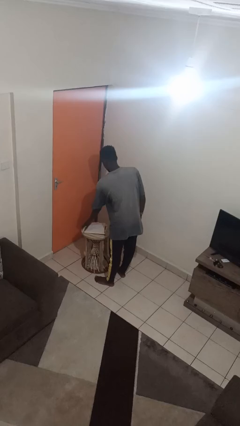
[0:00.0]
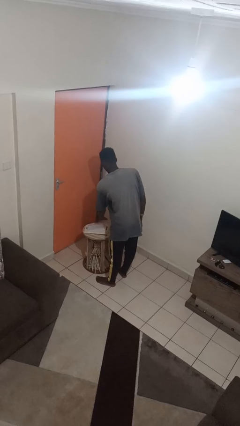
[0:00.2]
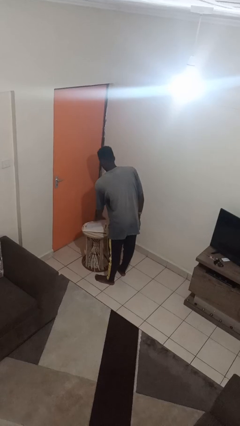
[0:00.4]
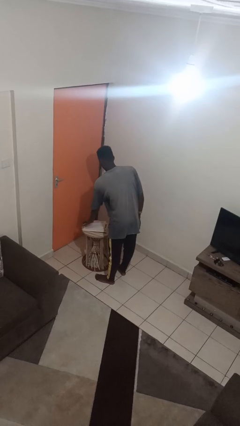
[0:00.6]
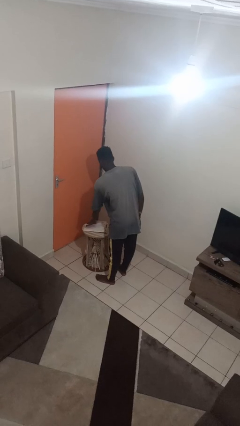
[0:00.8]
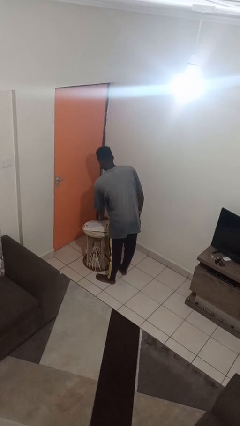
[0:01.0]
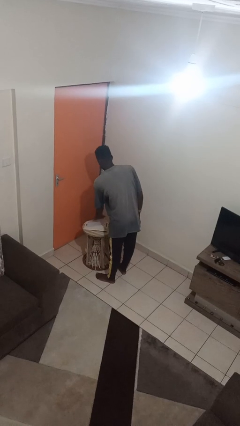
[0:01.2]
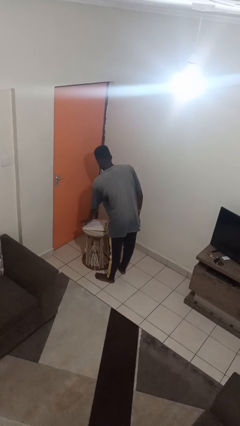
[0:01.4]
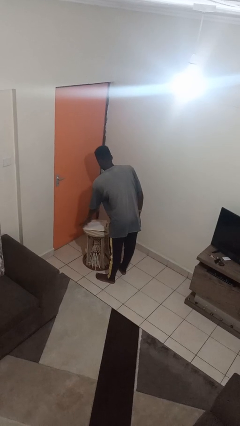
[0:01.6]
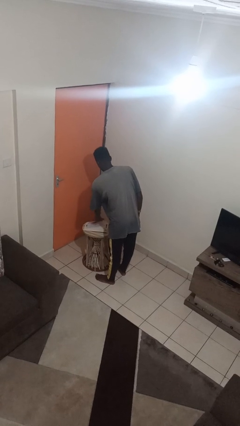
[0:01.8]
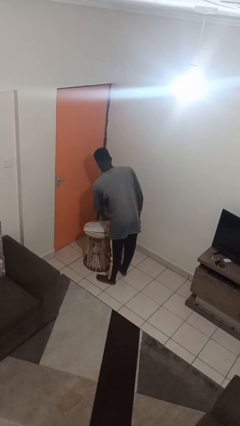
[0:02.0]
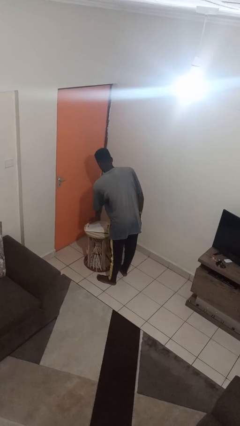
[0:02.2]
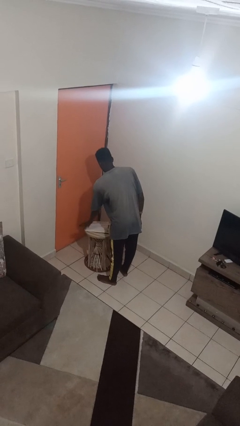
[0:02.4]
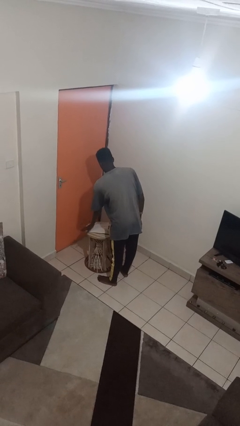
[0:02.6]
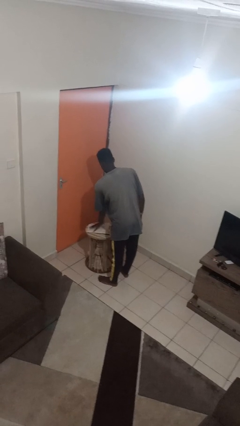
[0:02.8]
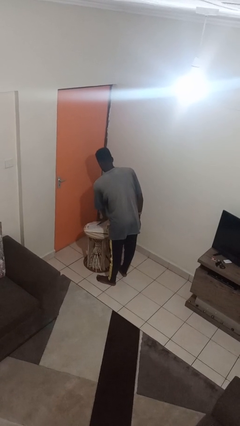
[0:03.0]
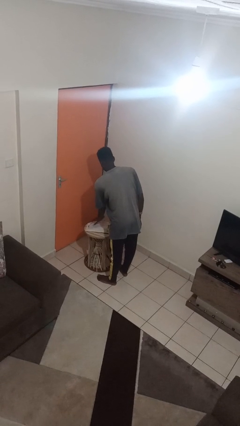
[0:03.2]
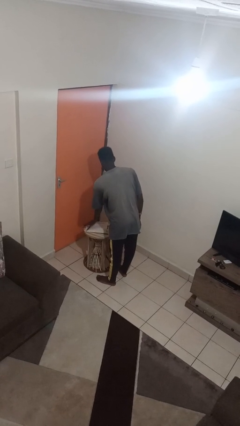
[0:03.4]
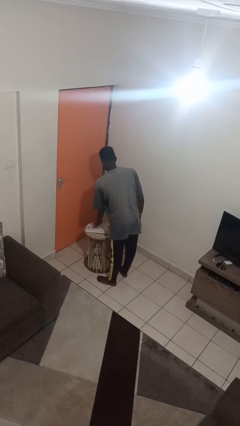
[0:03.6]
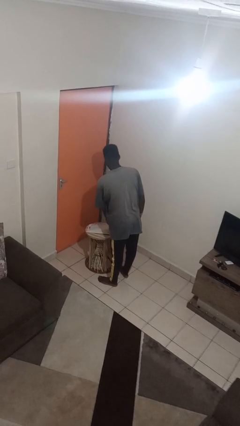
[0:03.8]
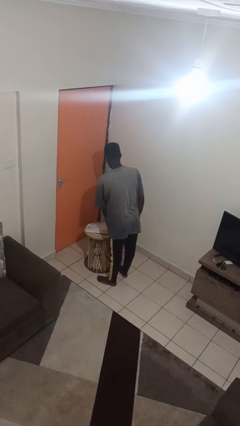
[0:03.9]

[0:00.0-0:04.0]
person waves hand over object

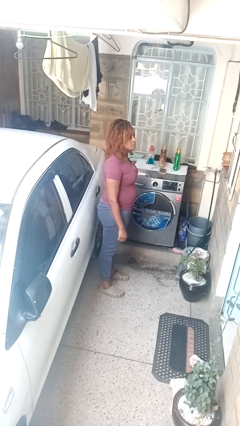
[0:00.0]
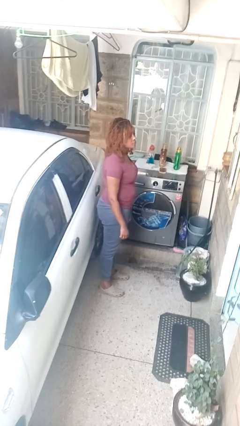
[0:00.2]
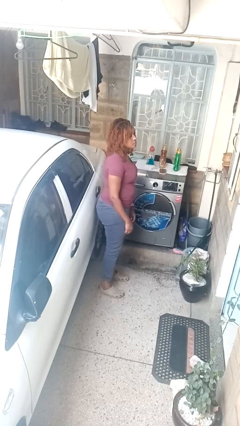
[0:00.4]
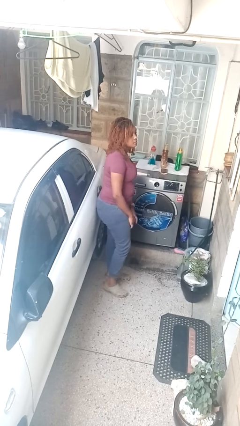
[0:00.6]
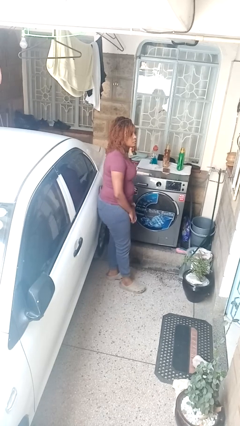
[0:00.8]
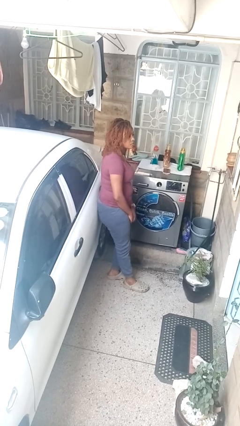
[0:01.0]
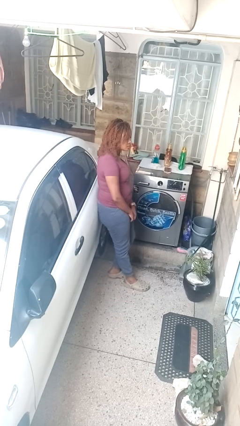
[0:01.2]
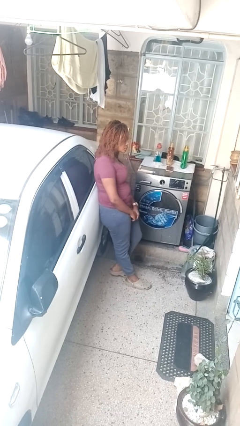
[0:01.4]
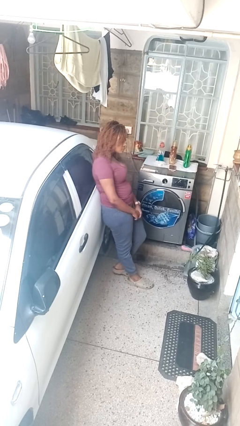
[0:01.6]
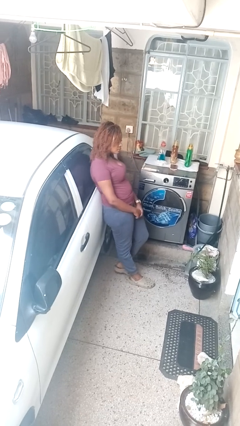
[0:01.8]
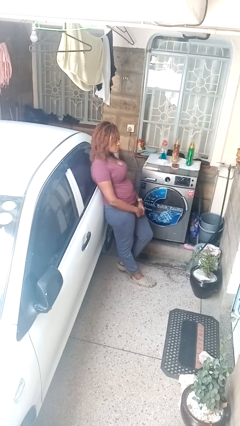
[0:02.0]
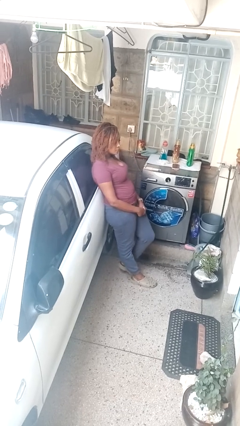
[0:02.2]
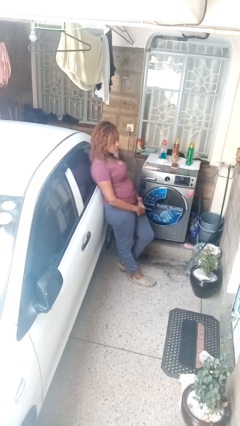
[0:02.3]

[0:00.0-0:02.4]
person leans against car

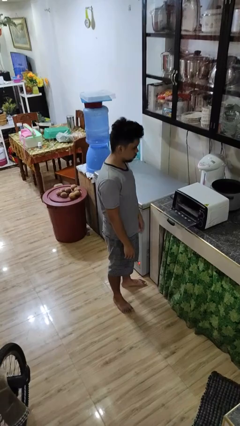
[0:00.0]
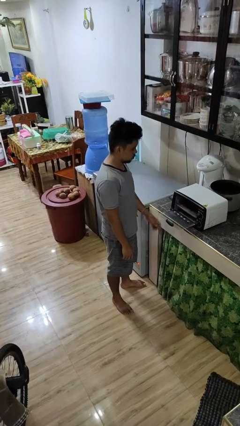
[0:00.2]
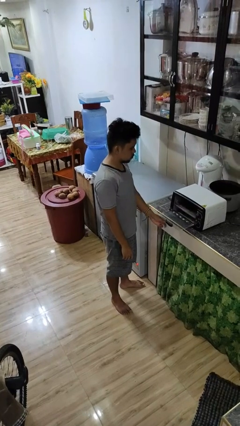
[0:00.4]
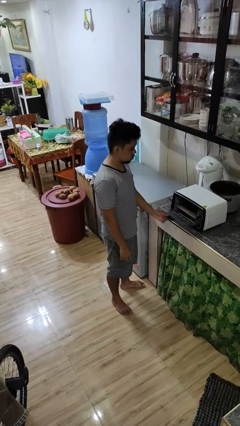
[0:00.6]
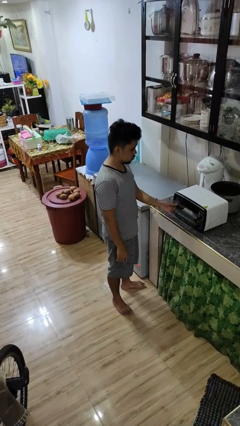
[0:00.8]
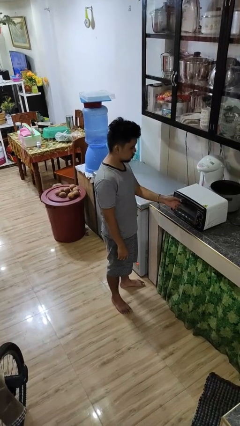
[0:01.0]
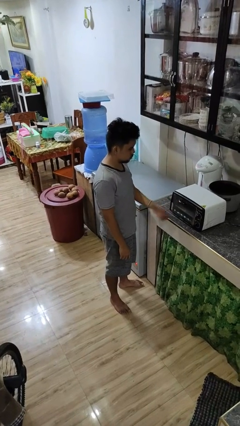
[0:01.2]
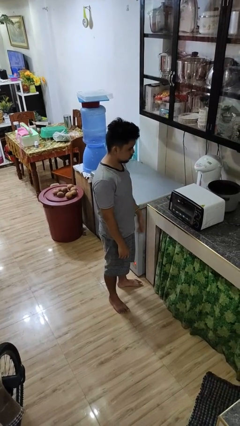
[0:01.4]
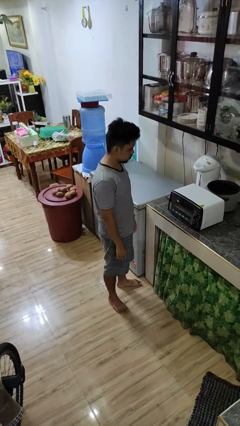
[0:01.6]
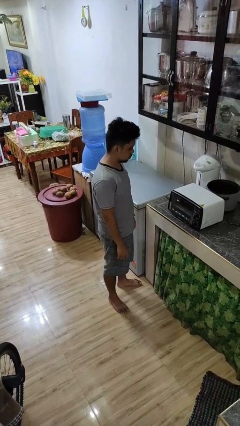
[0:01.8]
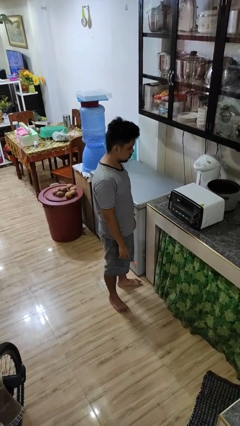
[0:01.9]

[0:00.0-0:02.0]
person closes microwave

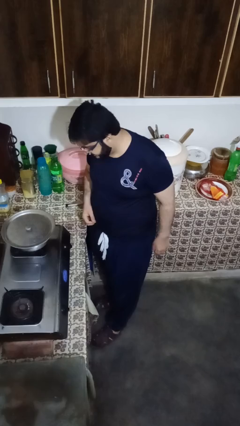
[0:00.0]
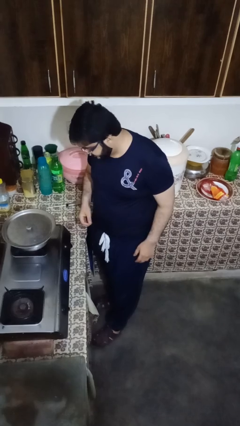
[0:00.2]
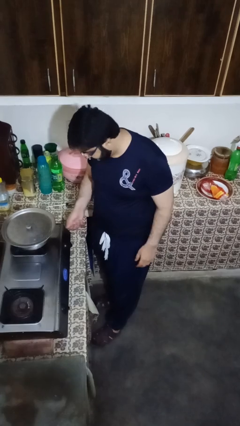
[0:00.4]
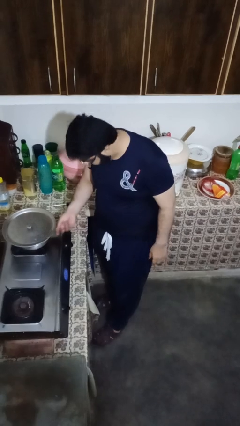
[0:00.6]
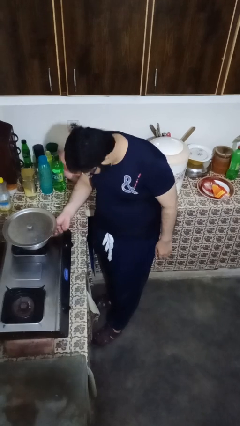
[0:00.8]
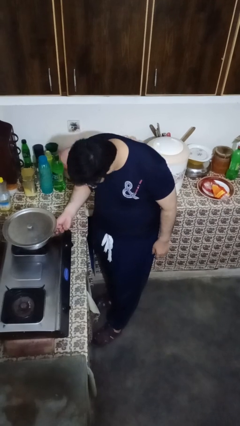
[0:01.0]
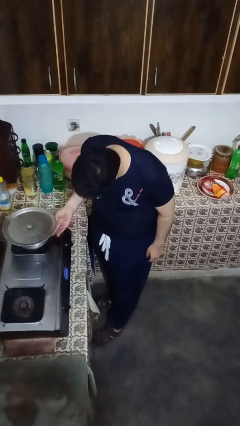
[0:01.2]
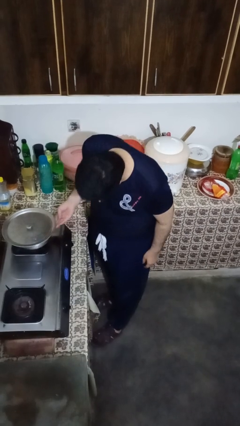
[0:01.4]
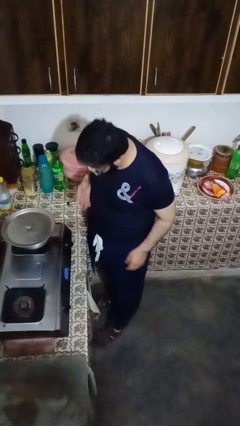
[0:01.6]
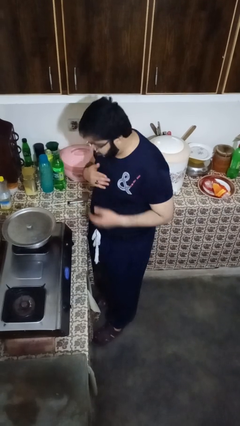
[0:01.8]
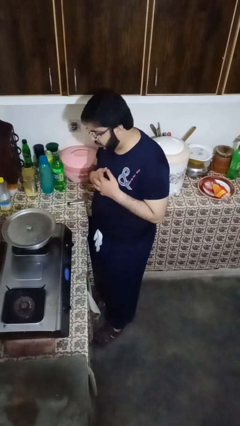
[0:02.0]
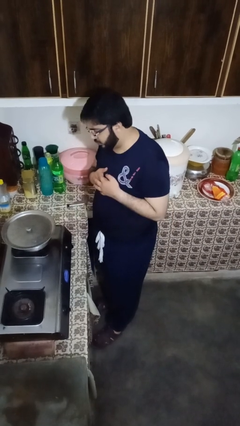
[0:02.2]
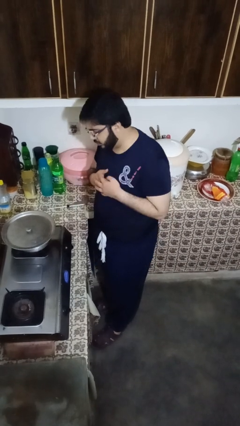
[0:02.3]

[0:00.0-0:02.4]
person burns hand

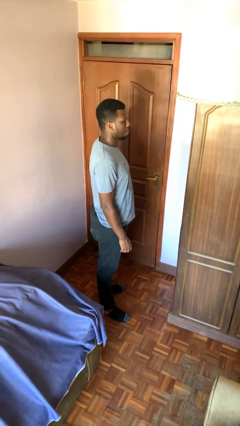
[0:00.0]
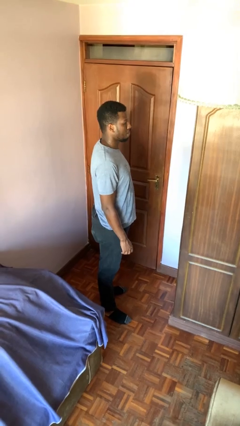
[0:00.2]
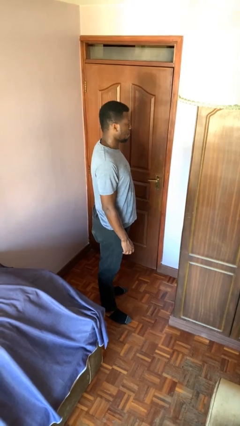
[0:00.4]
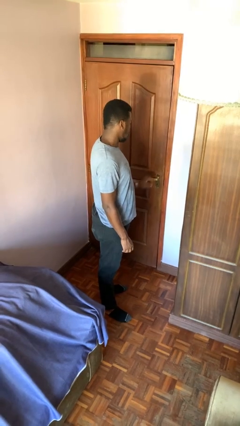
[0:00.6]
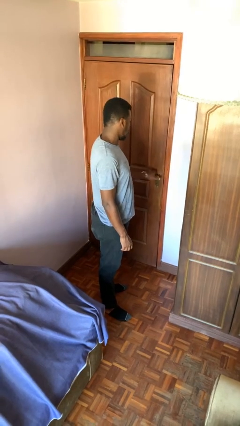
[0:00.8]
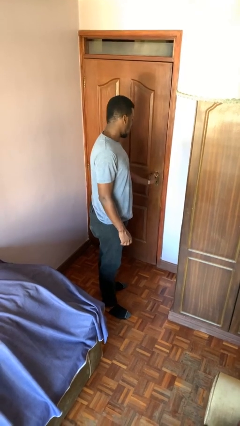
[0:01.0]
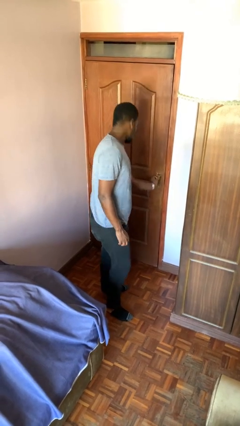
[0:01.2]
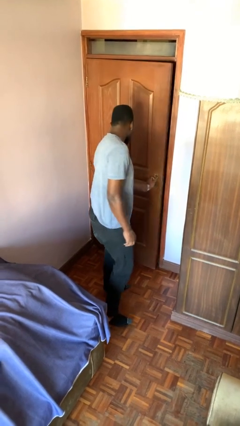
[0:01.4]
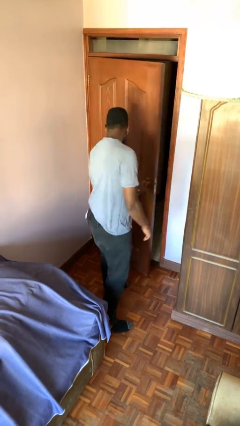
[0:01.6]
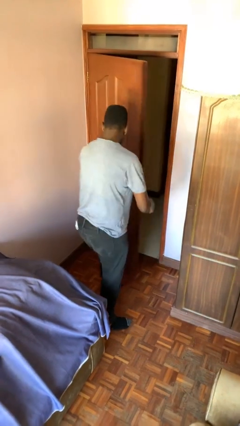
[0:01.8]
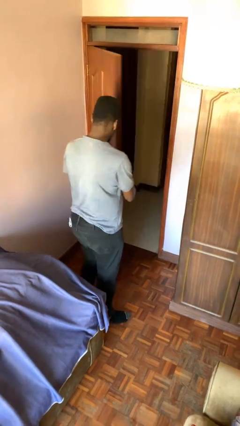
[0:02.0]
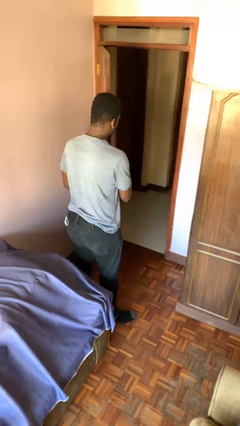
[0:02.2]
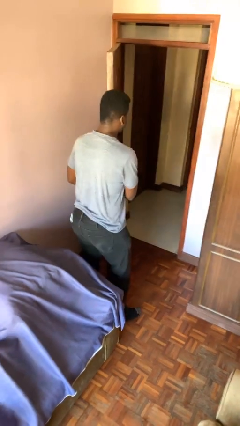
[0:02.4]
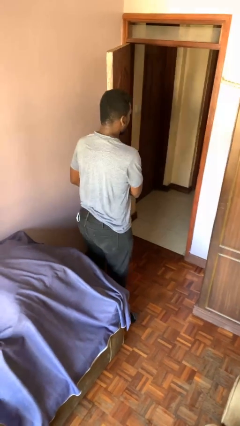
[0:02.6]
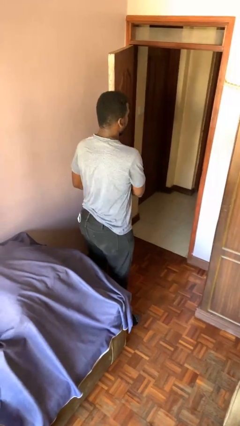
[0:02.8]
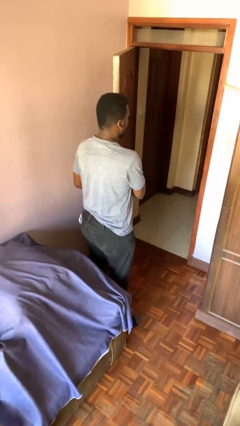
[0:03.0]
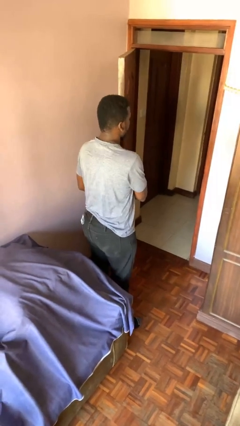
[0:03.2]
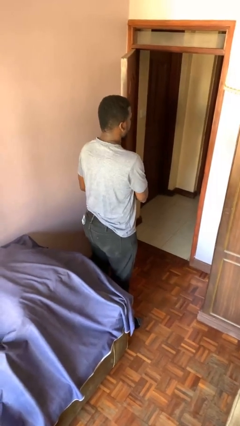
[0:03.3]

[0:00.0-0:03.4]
person opens facility door

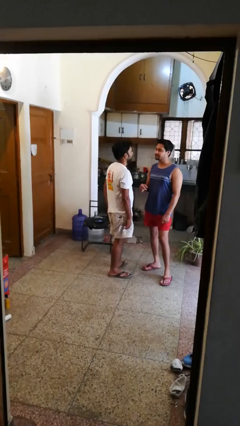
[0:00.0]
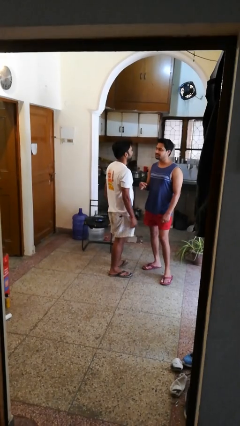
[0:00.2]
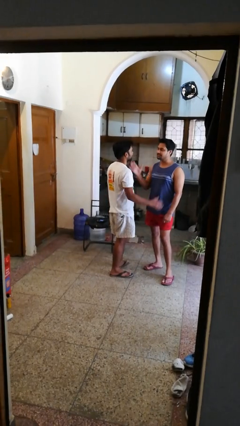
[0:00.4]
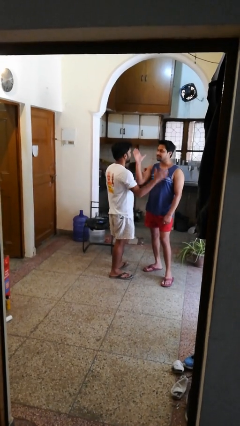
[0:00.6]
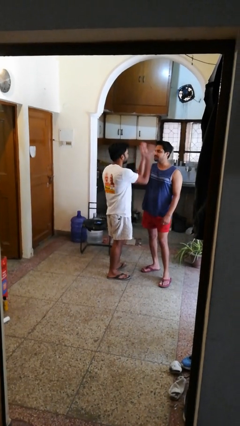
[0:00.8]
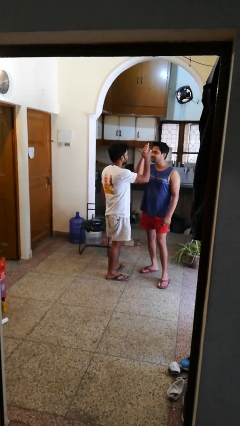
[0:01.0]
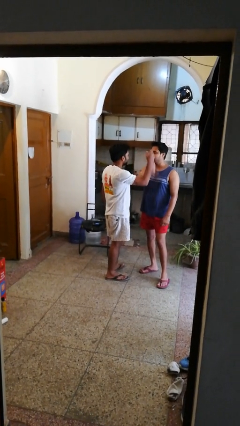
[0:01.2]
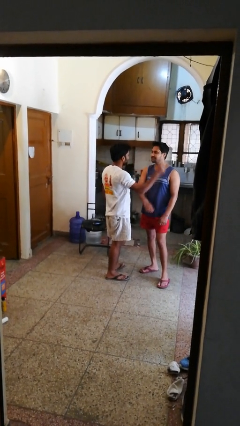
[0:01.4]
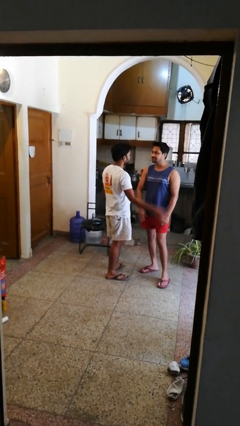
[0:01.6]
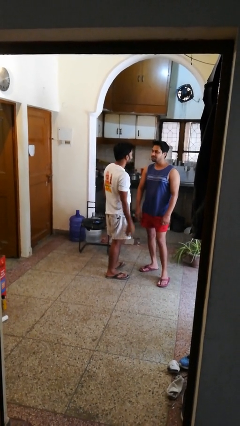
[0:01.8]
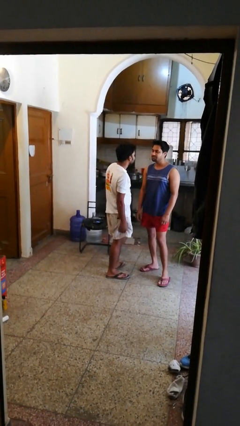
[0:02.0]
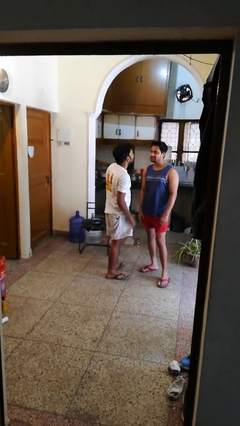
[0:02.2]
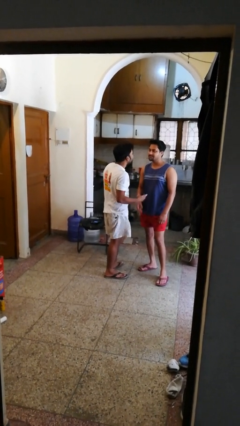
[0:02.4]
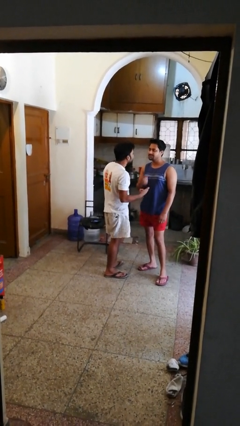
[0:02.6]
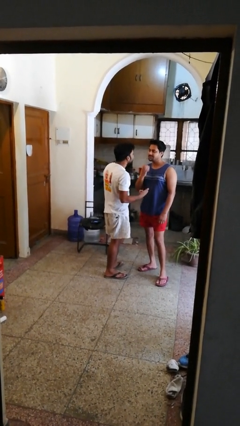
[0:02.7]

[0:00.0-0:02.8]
person highfives hand

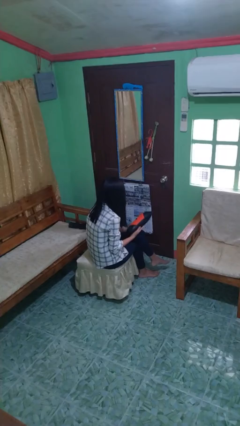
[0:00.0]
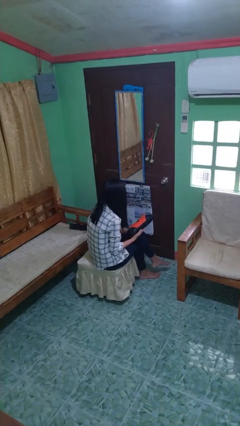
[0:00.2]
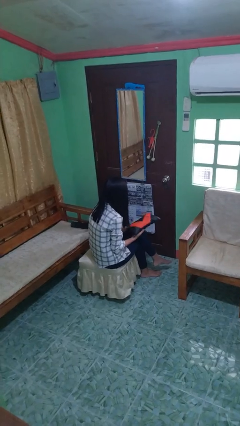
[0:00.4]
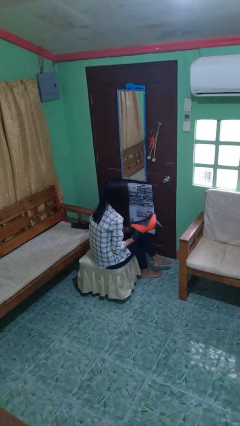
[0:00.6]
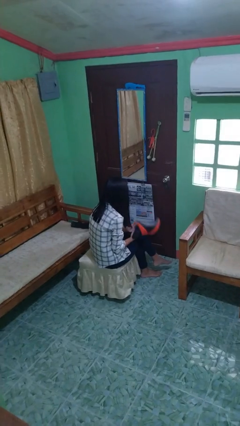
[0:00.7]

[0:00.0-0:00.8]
person drops object
